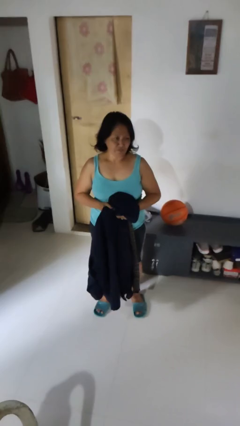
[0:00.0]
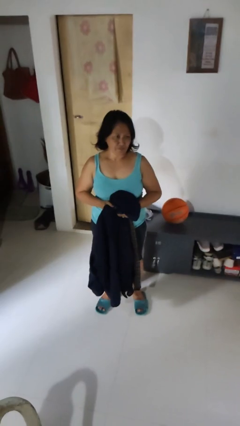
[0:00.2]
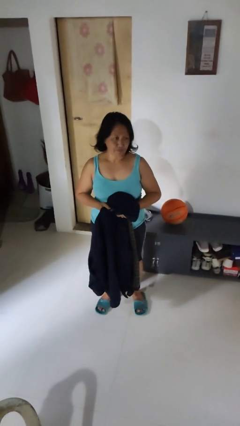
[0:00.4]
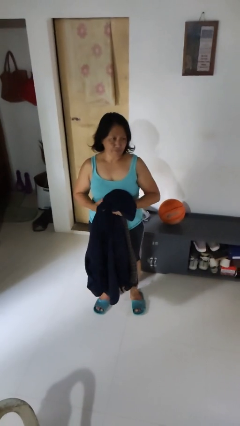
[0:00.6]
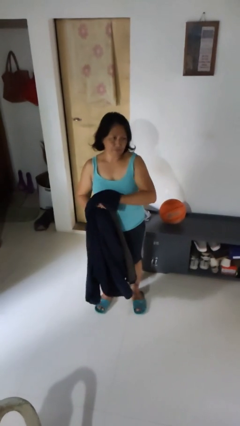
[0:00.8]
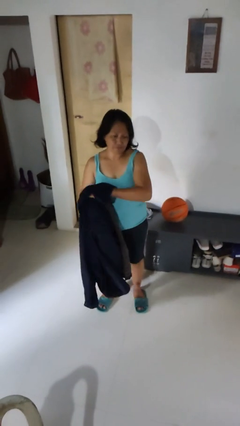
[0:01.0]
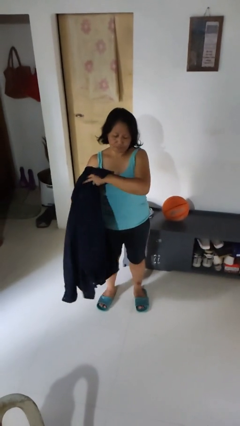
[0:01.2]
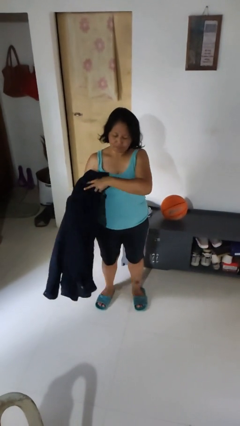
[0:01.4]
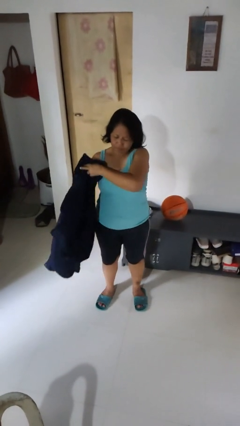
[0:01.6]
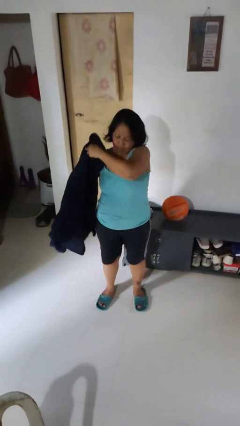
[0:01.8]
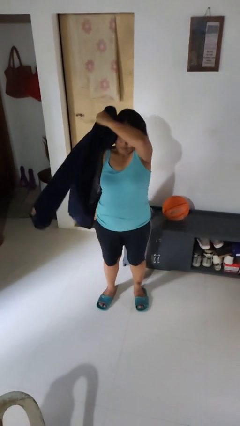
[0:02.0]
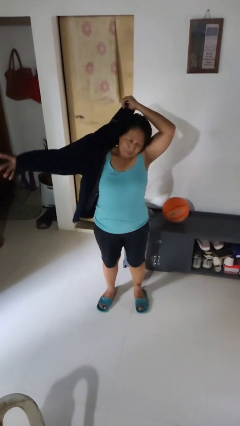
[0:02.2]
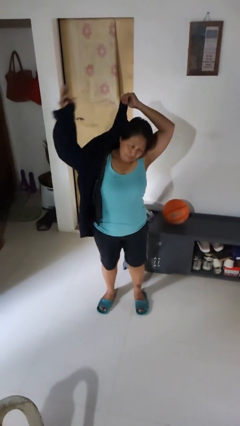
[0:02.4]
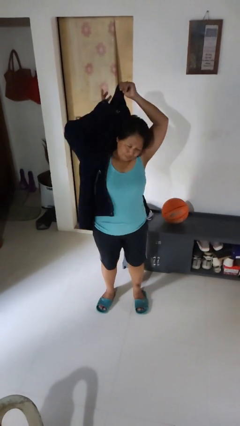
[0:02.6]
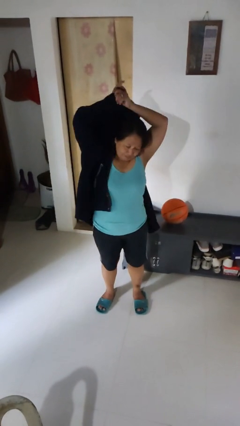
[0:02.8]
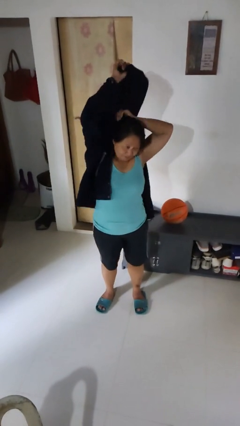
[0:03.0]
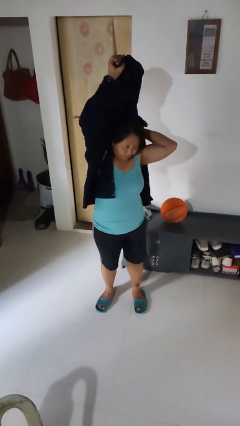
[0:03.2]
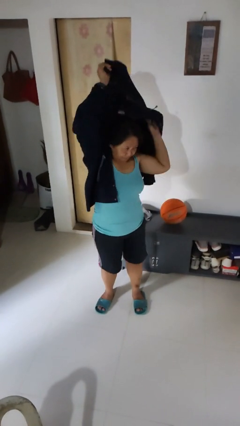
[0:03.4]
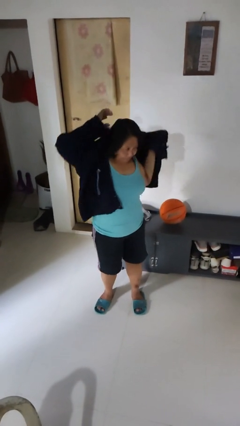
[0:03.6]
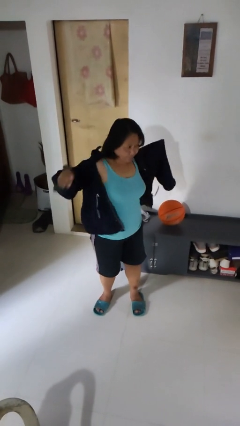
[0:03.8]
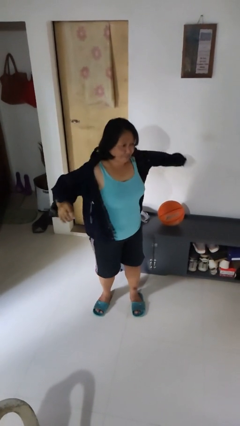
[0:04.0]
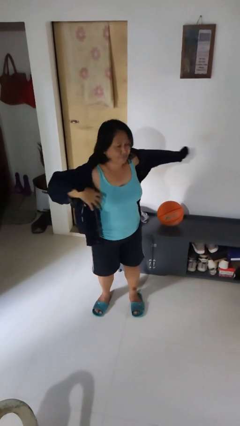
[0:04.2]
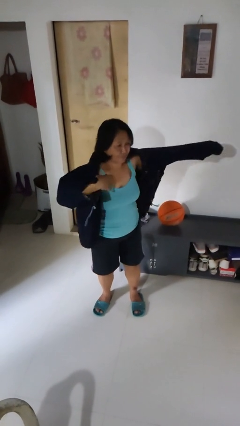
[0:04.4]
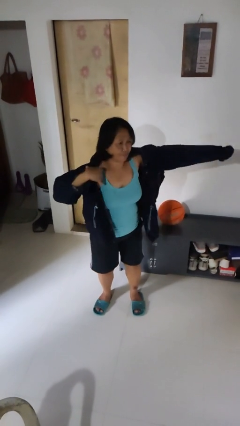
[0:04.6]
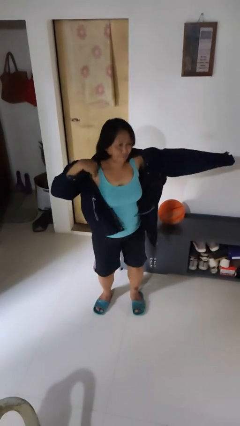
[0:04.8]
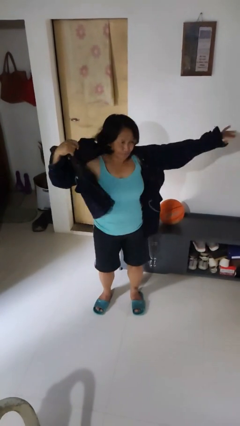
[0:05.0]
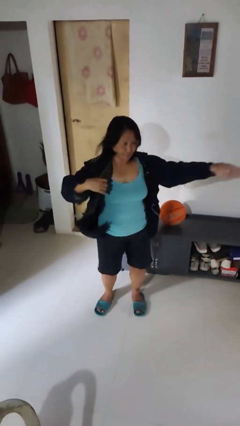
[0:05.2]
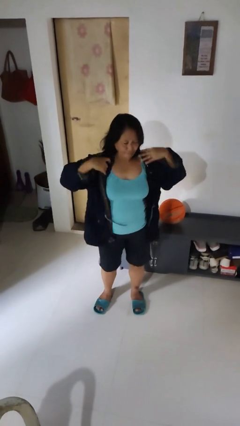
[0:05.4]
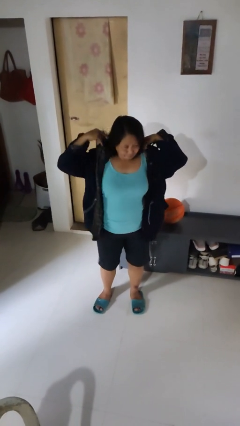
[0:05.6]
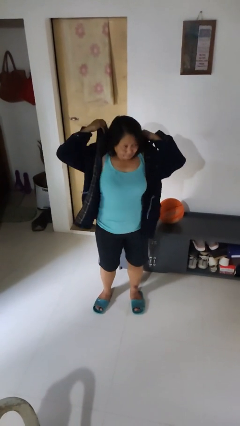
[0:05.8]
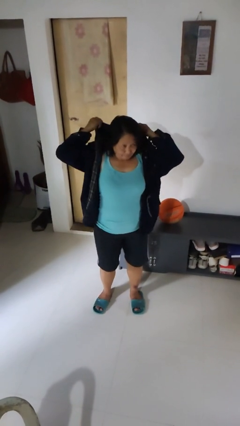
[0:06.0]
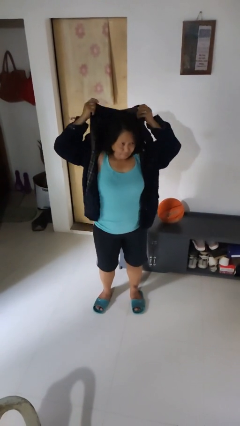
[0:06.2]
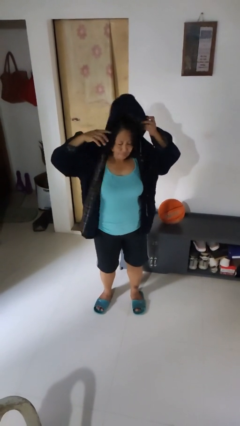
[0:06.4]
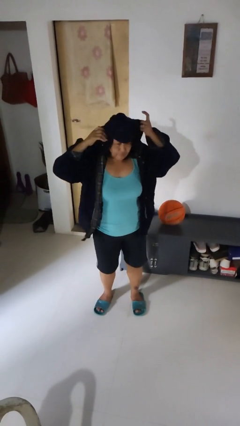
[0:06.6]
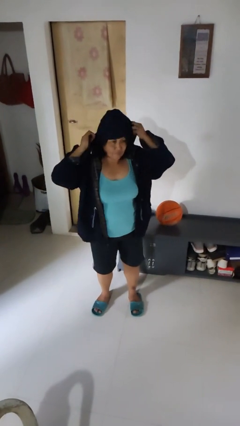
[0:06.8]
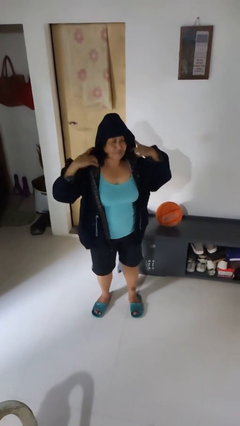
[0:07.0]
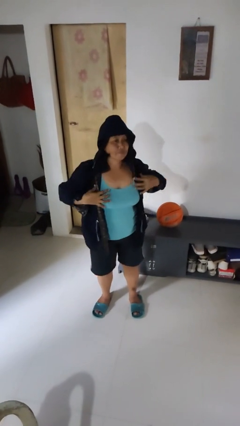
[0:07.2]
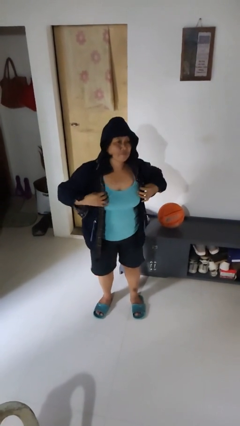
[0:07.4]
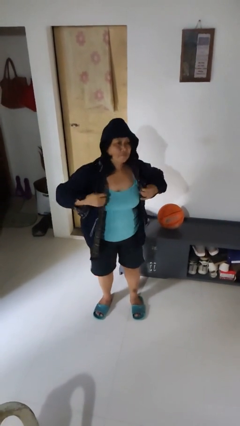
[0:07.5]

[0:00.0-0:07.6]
person puts on hoodie

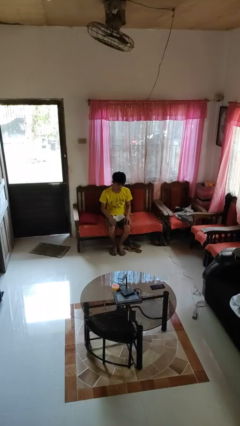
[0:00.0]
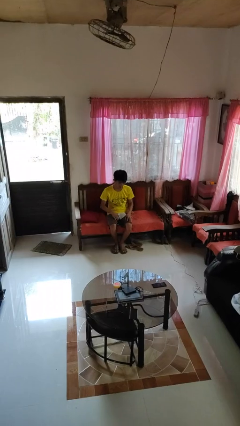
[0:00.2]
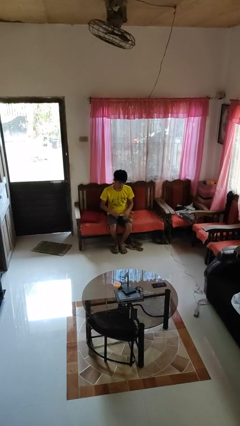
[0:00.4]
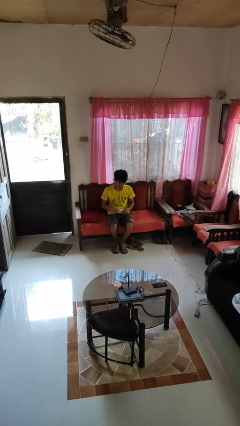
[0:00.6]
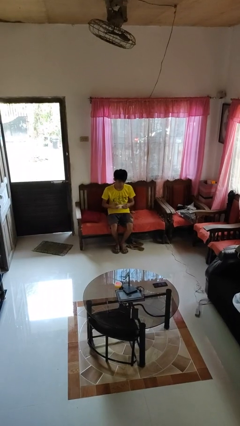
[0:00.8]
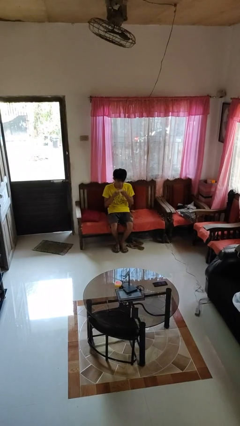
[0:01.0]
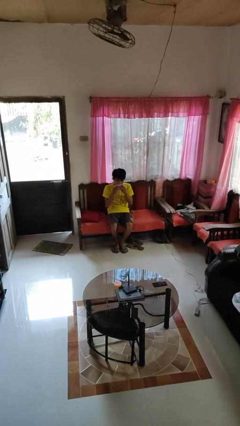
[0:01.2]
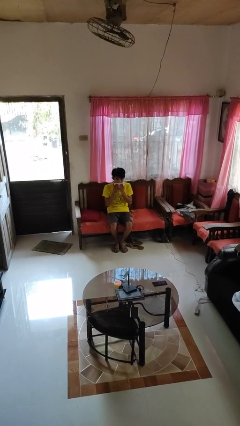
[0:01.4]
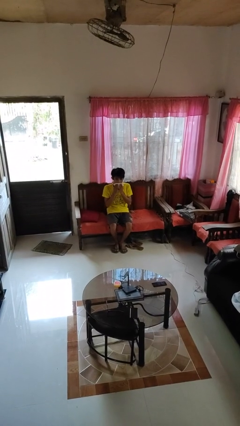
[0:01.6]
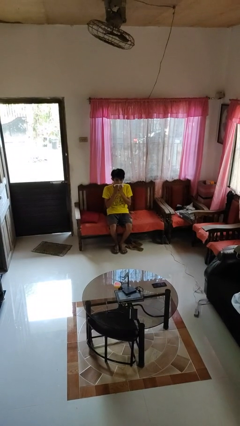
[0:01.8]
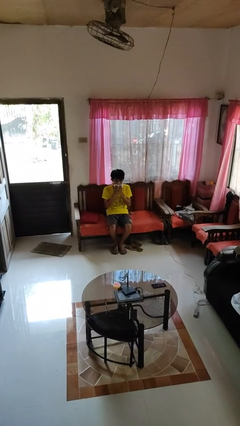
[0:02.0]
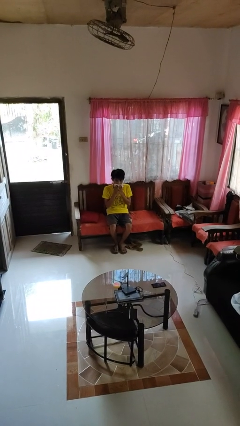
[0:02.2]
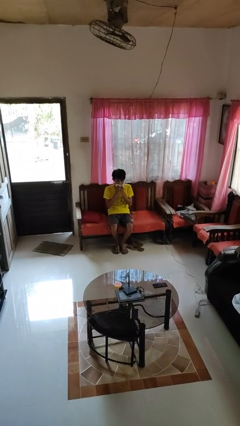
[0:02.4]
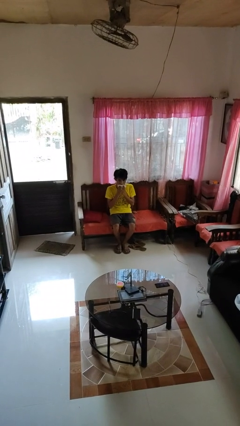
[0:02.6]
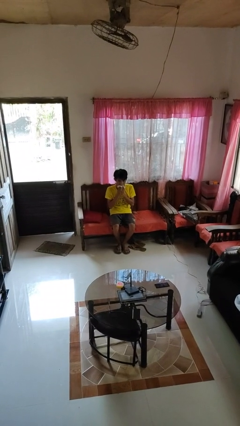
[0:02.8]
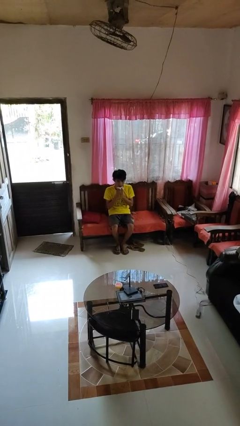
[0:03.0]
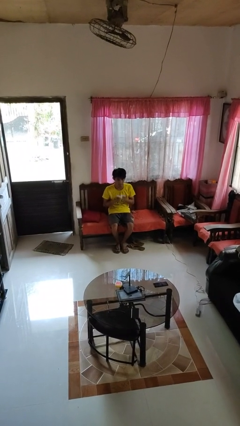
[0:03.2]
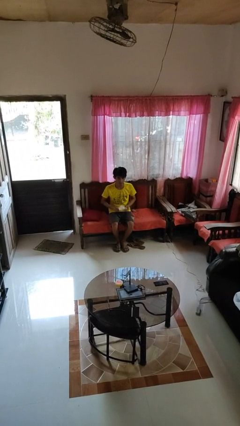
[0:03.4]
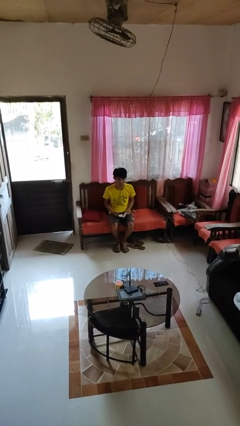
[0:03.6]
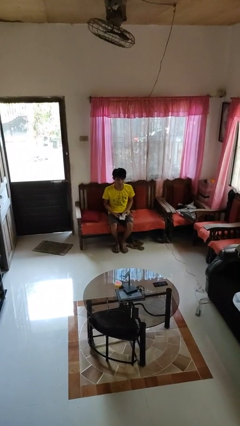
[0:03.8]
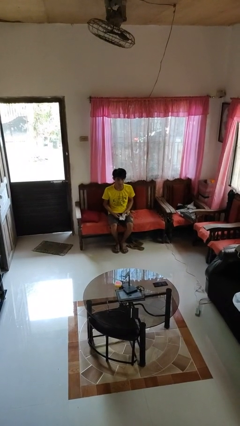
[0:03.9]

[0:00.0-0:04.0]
person wipes mouth with napkin

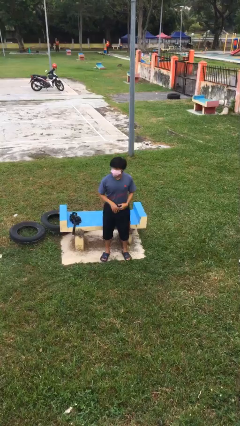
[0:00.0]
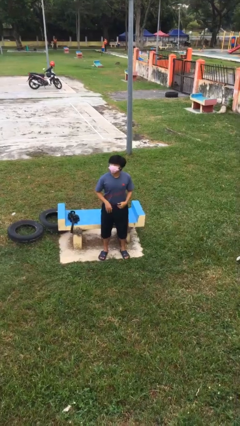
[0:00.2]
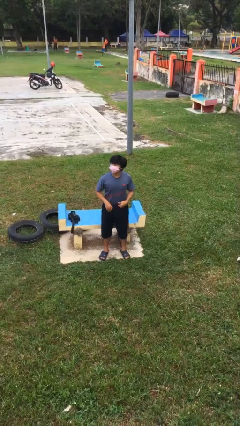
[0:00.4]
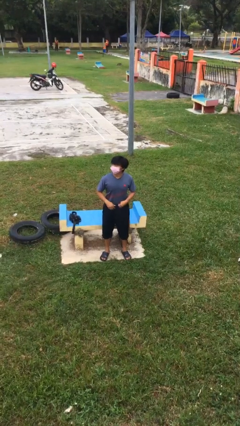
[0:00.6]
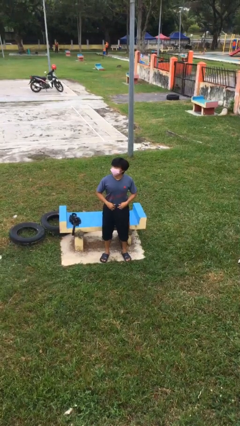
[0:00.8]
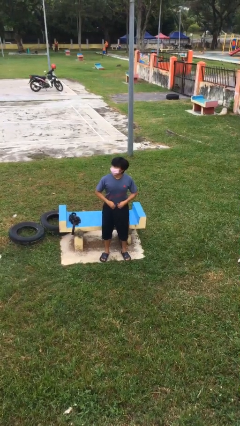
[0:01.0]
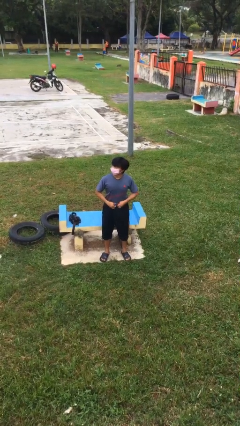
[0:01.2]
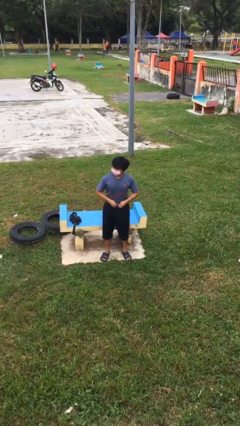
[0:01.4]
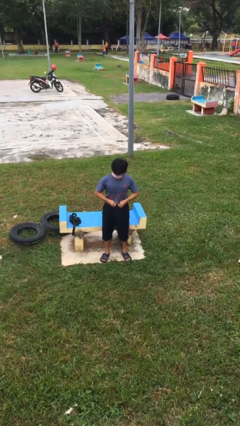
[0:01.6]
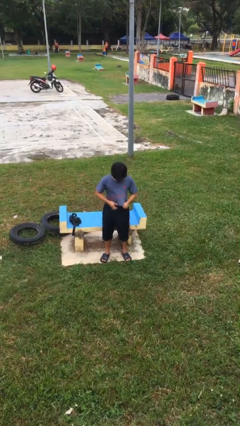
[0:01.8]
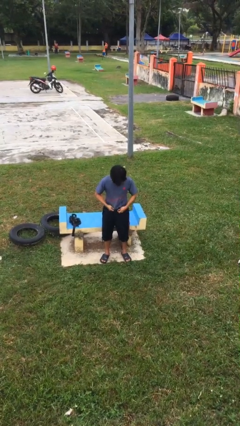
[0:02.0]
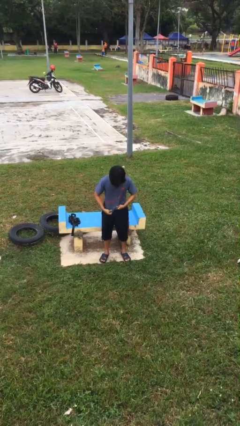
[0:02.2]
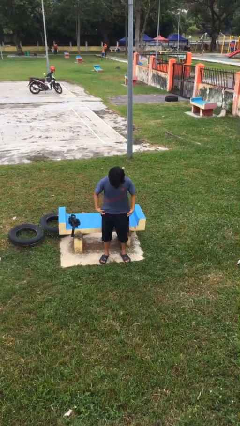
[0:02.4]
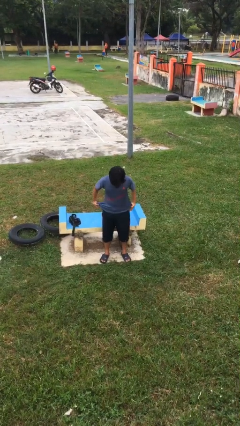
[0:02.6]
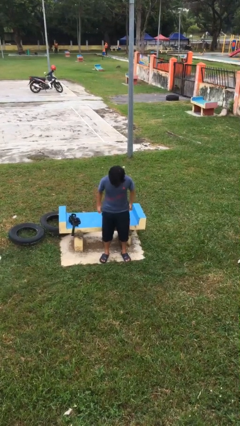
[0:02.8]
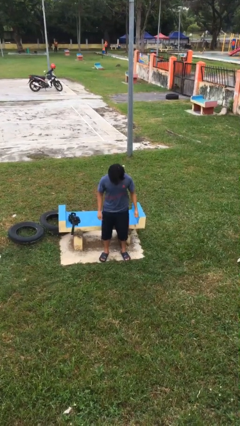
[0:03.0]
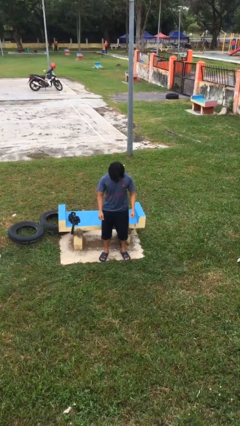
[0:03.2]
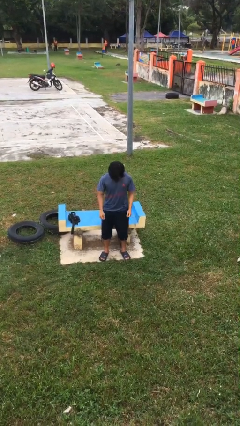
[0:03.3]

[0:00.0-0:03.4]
person untucks shirt

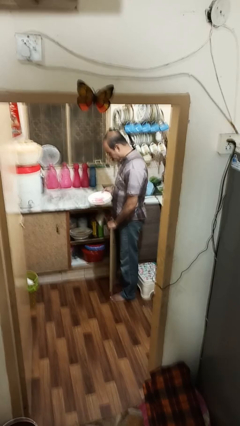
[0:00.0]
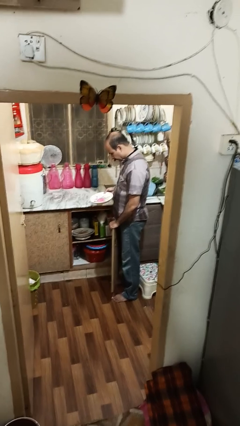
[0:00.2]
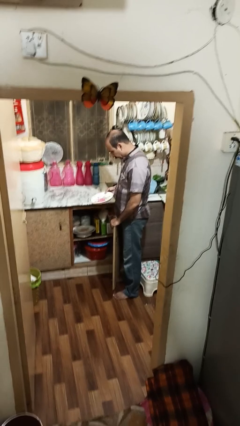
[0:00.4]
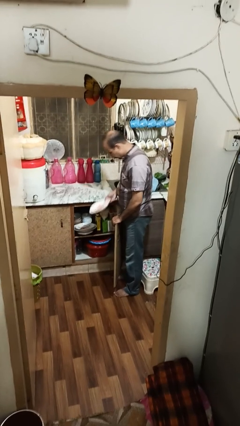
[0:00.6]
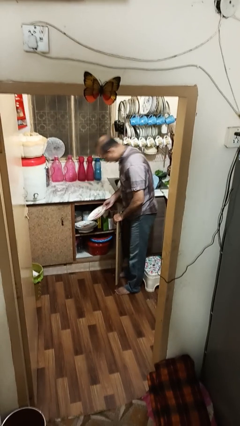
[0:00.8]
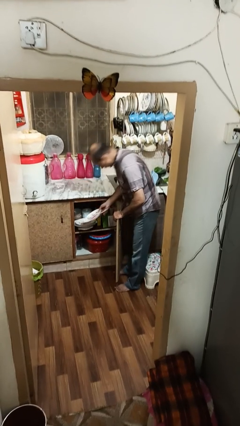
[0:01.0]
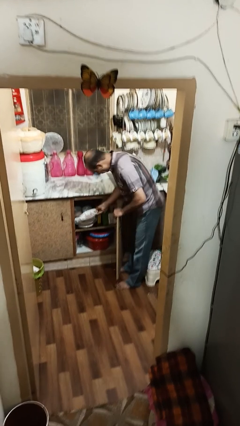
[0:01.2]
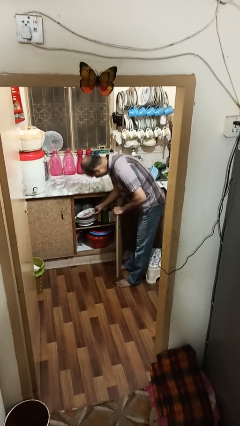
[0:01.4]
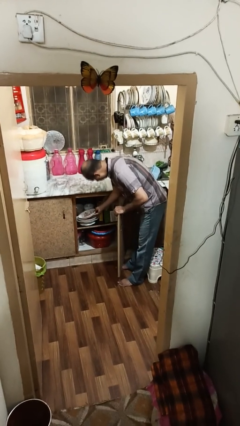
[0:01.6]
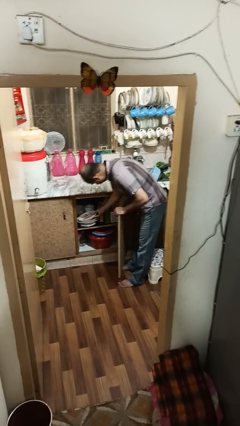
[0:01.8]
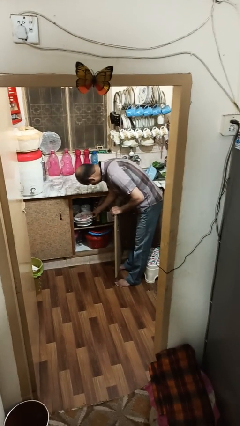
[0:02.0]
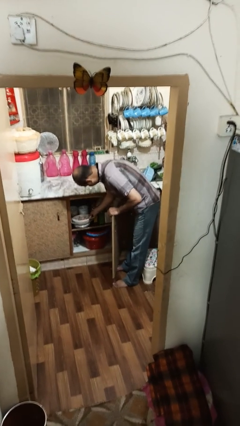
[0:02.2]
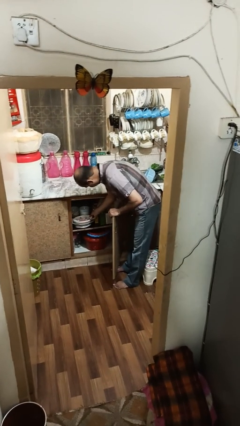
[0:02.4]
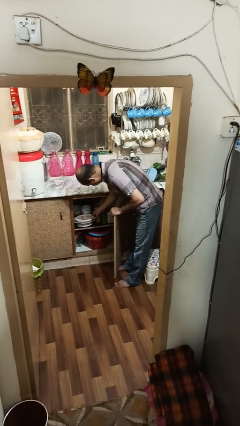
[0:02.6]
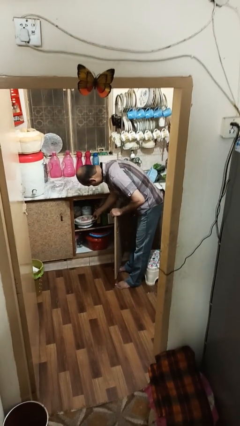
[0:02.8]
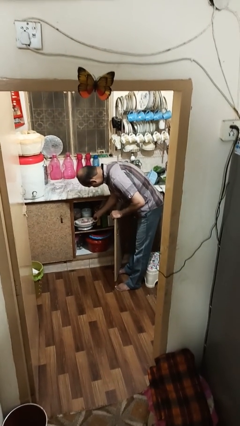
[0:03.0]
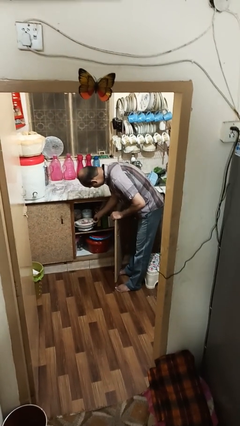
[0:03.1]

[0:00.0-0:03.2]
person puts object in cabinet
